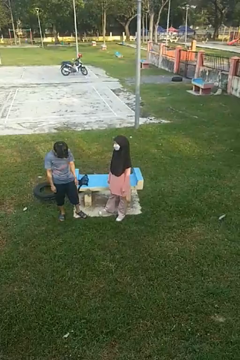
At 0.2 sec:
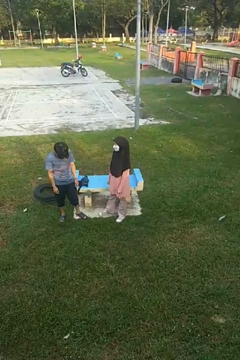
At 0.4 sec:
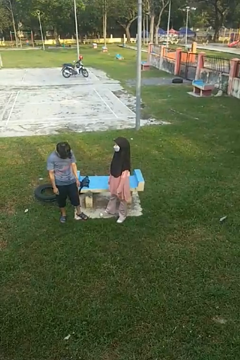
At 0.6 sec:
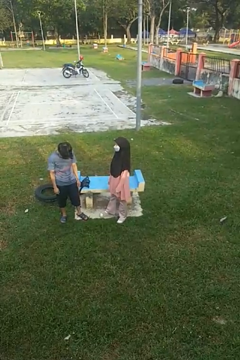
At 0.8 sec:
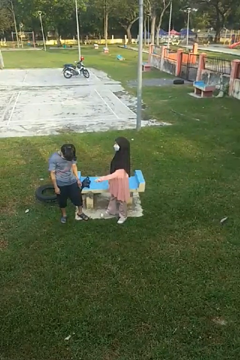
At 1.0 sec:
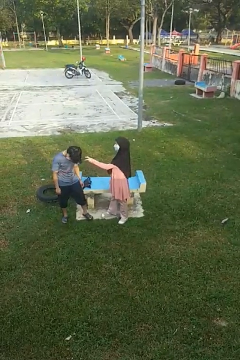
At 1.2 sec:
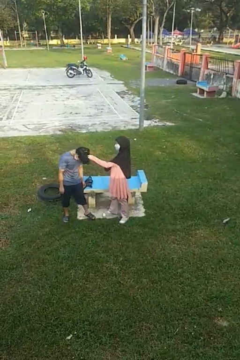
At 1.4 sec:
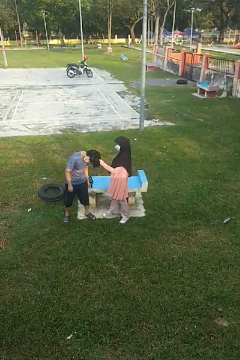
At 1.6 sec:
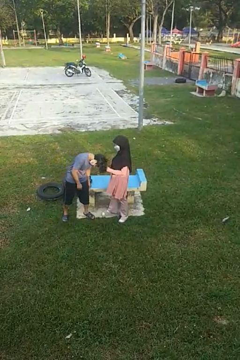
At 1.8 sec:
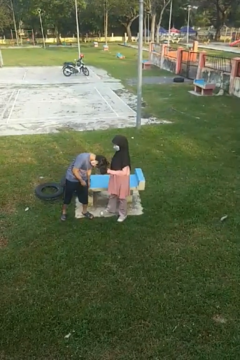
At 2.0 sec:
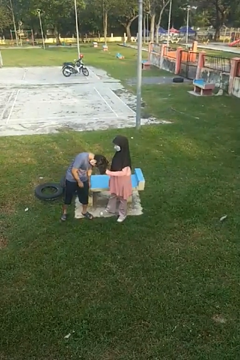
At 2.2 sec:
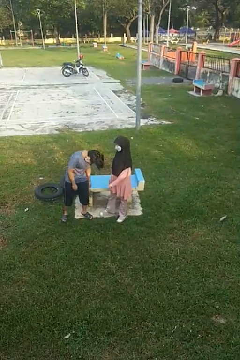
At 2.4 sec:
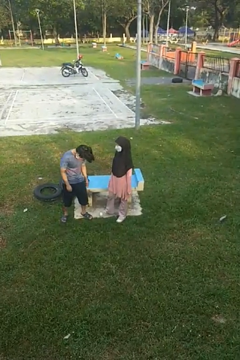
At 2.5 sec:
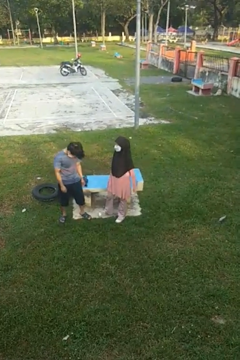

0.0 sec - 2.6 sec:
person grabs person by hair

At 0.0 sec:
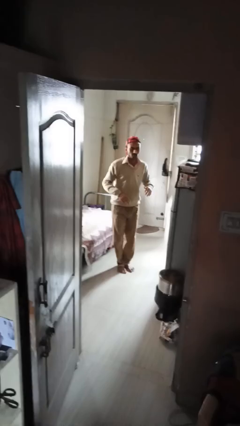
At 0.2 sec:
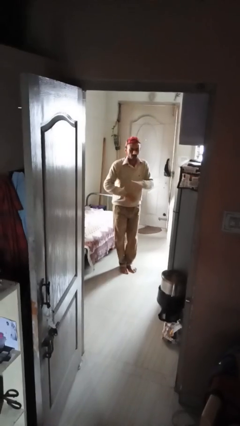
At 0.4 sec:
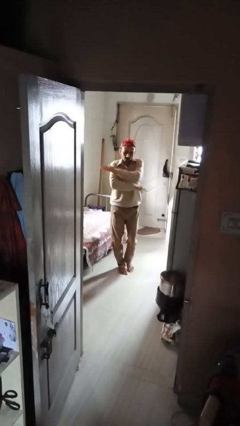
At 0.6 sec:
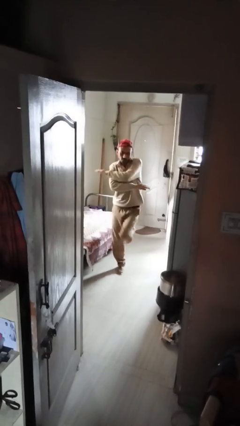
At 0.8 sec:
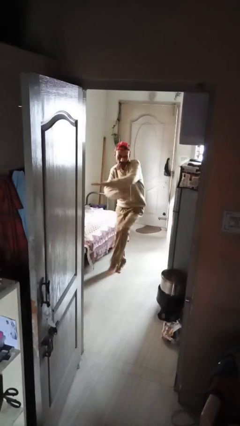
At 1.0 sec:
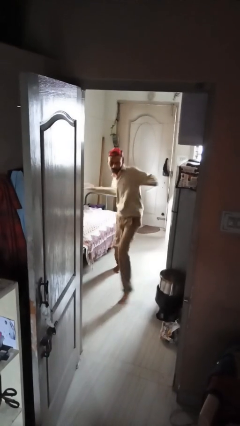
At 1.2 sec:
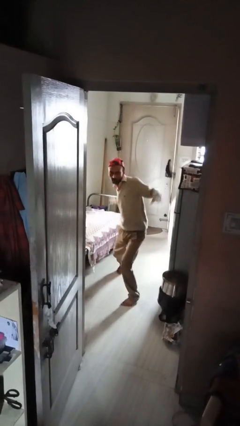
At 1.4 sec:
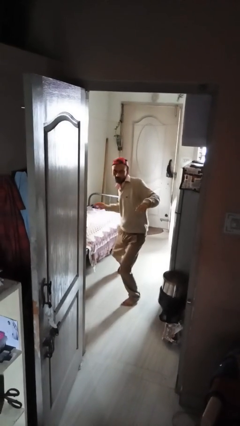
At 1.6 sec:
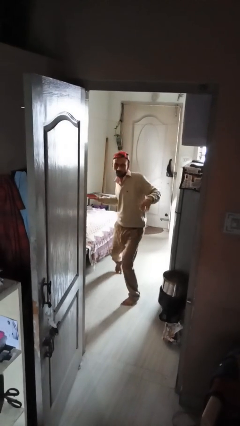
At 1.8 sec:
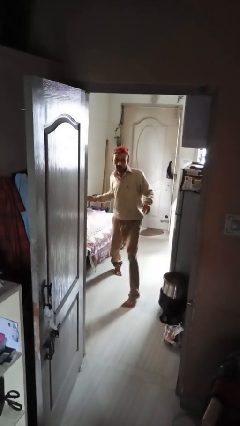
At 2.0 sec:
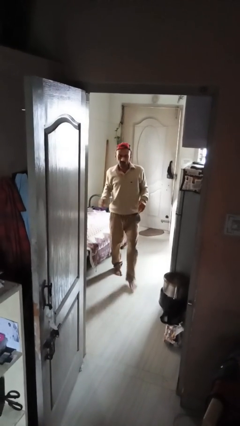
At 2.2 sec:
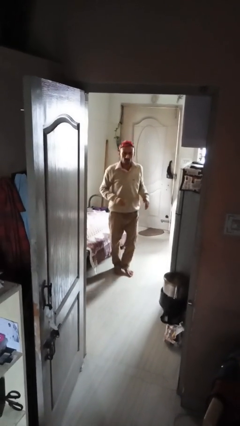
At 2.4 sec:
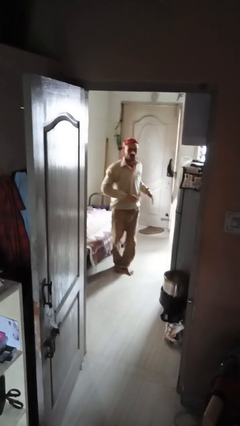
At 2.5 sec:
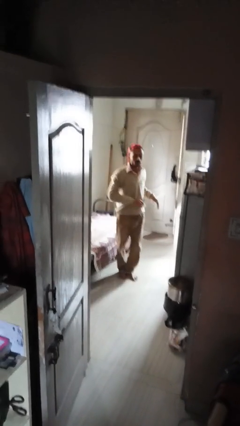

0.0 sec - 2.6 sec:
person karate chop

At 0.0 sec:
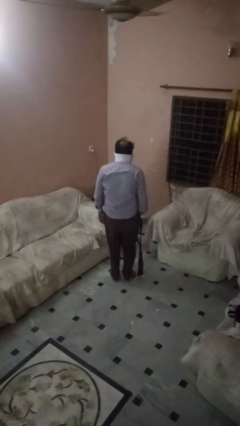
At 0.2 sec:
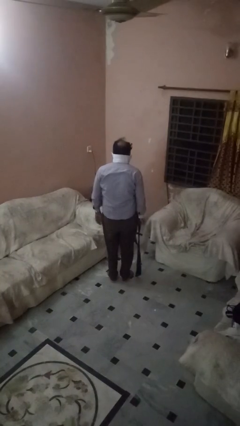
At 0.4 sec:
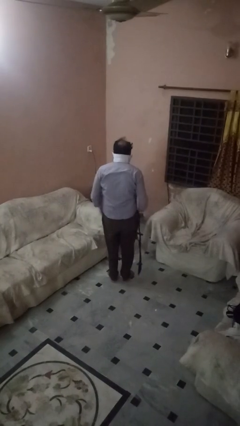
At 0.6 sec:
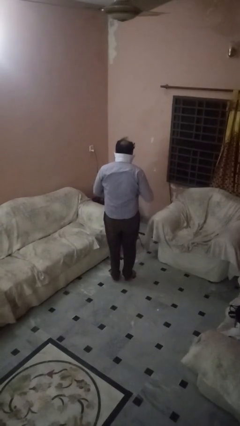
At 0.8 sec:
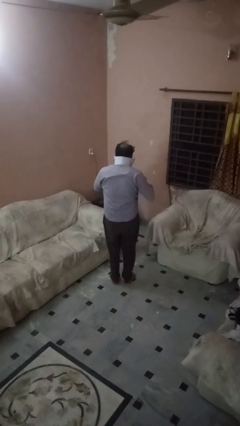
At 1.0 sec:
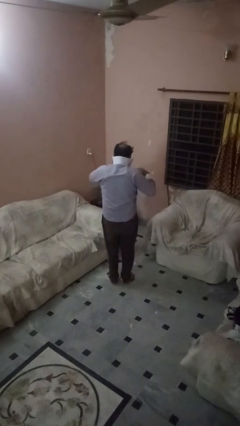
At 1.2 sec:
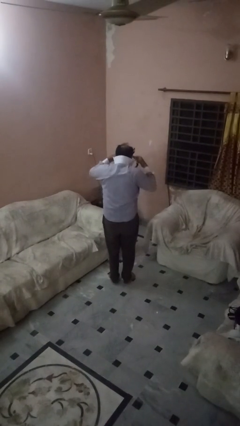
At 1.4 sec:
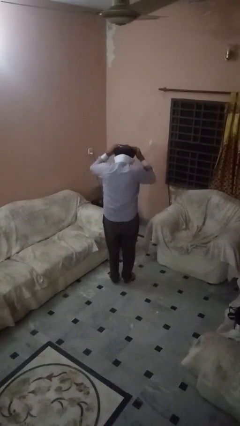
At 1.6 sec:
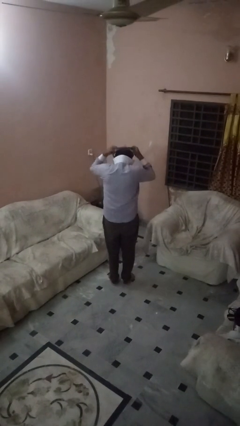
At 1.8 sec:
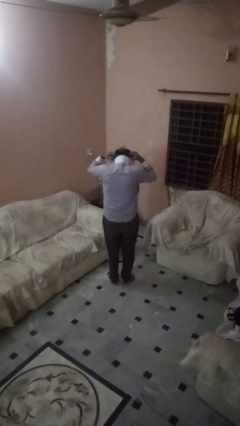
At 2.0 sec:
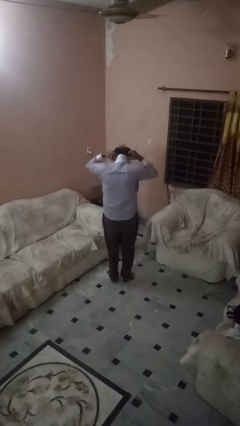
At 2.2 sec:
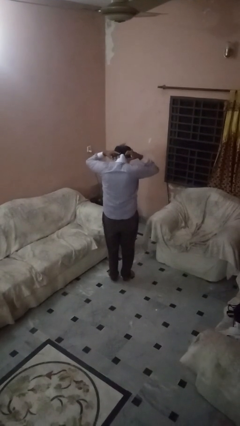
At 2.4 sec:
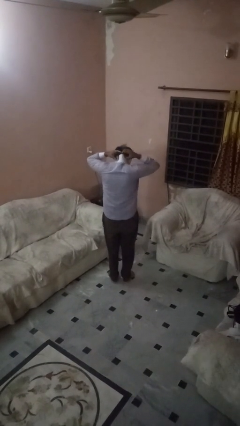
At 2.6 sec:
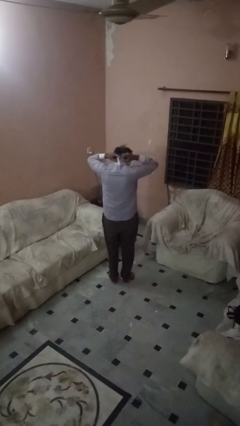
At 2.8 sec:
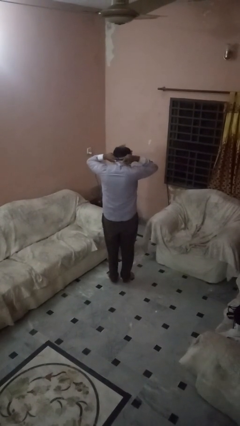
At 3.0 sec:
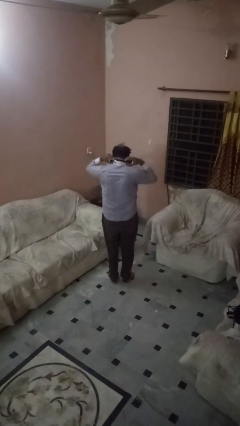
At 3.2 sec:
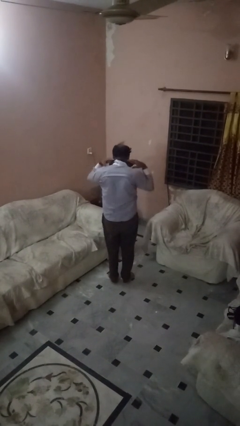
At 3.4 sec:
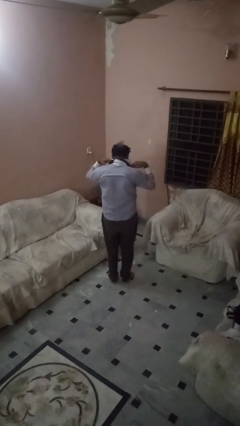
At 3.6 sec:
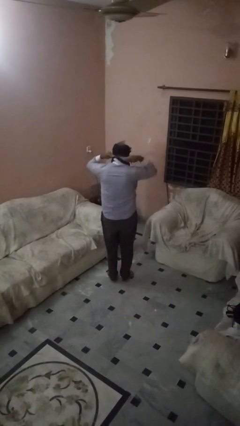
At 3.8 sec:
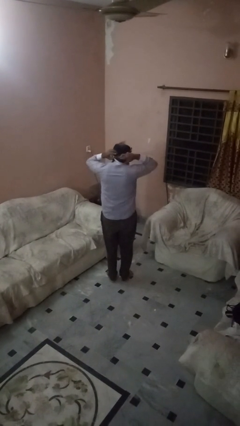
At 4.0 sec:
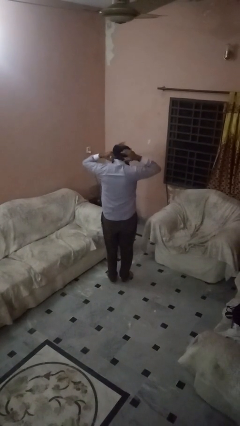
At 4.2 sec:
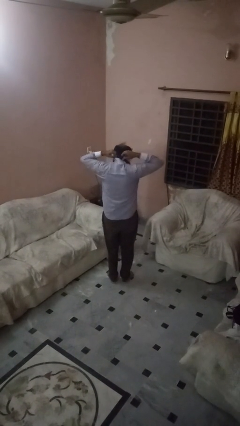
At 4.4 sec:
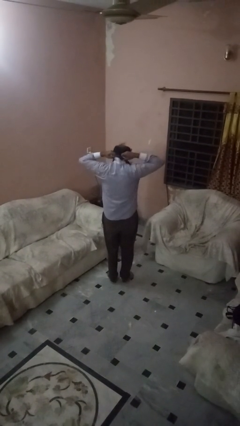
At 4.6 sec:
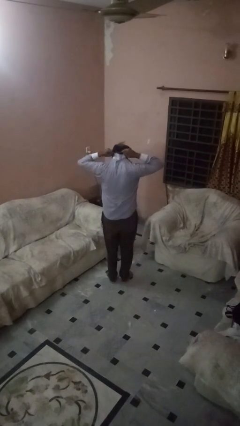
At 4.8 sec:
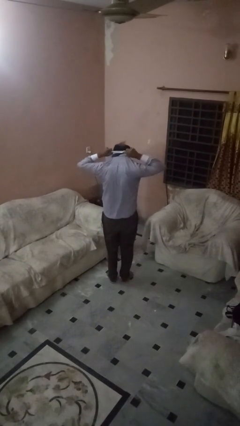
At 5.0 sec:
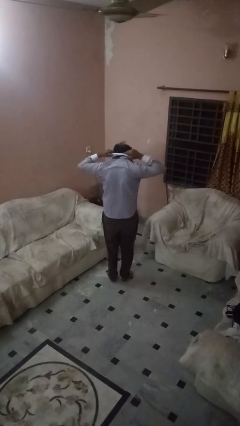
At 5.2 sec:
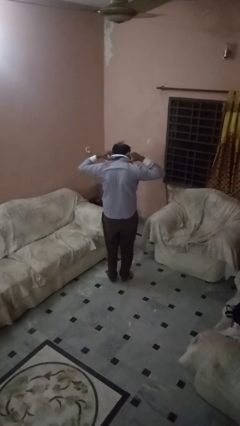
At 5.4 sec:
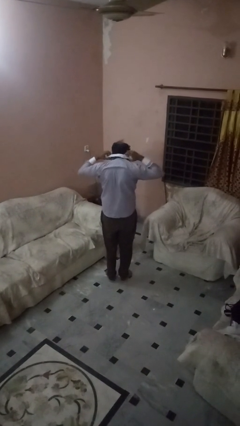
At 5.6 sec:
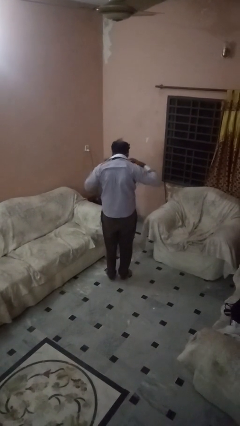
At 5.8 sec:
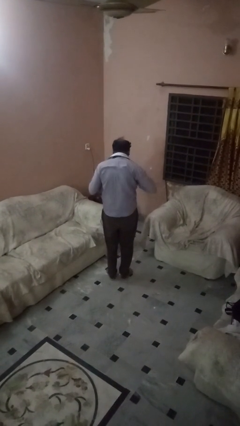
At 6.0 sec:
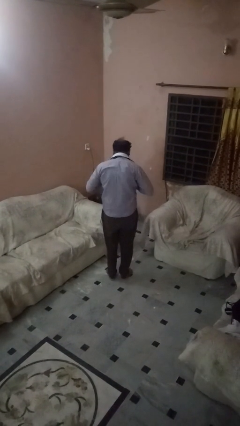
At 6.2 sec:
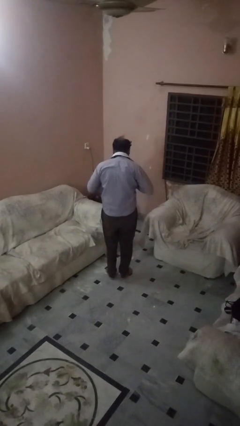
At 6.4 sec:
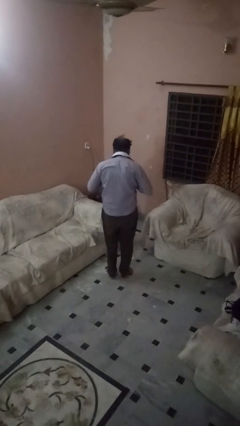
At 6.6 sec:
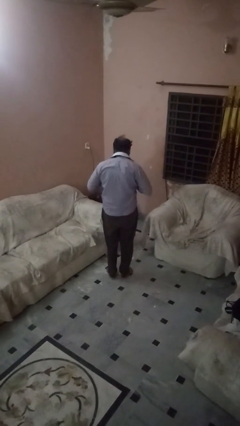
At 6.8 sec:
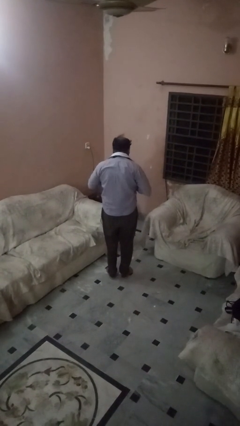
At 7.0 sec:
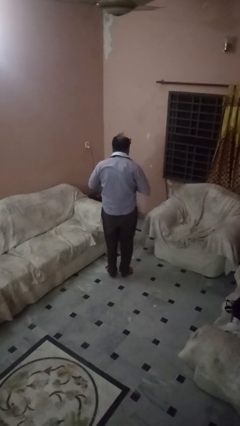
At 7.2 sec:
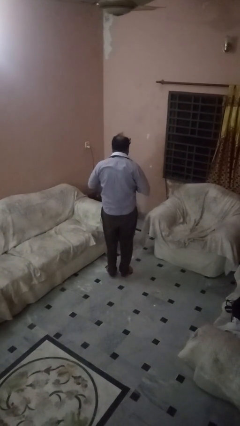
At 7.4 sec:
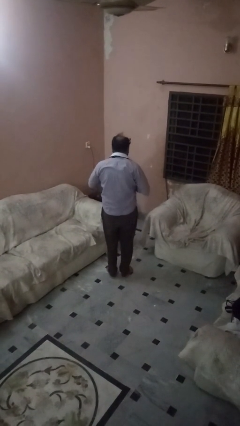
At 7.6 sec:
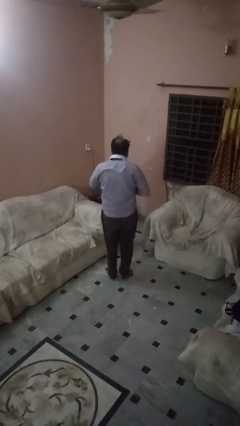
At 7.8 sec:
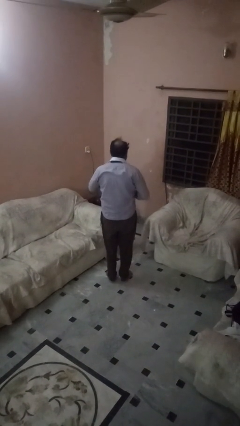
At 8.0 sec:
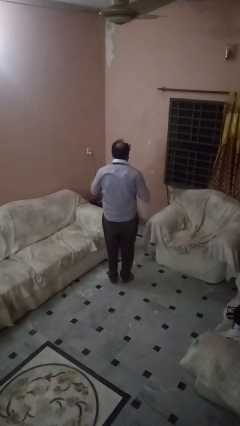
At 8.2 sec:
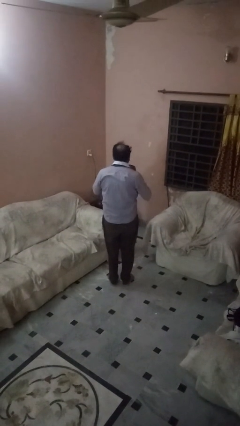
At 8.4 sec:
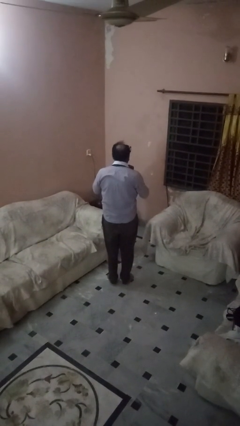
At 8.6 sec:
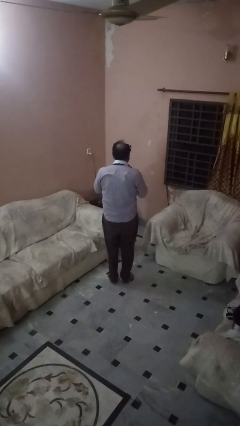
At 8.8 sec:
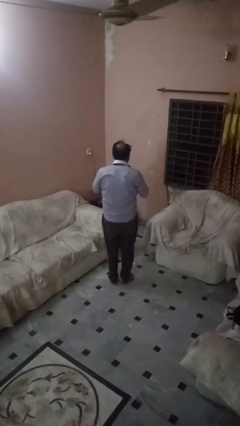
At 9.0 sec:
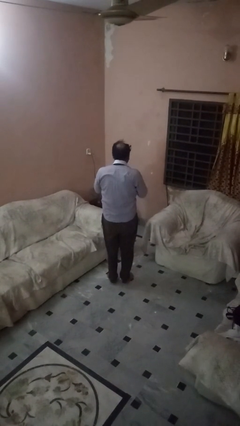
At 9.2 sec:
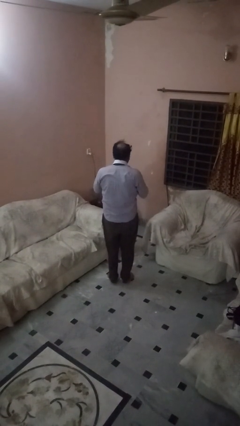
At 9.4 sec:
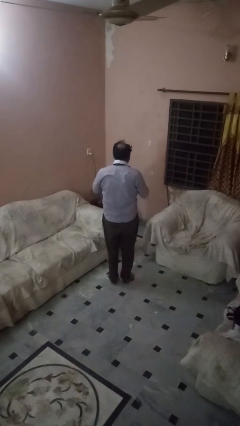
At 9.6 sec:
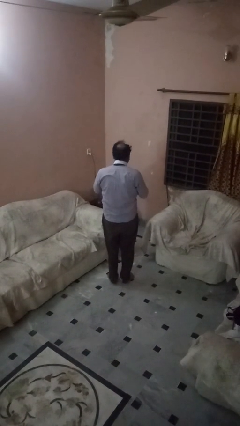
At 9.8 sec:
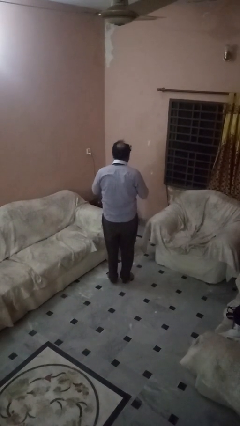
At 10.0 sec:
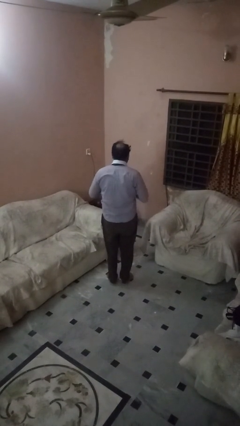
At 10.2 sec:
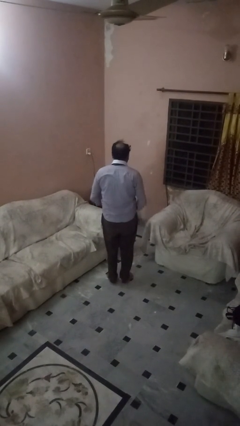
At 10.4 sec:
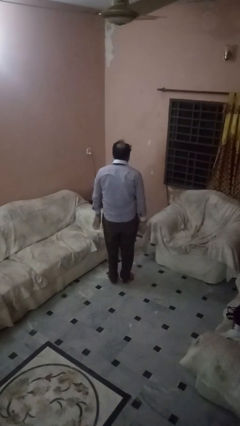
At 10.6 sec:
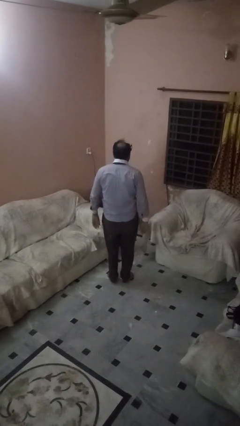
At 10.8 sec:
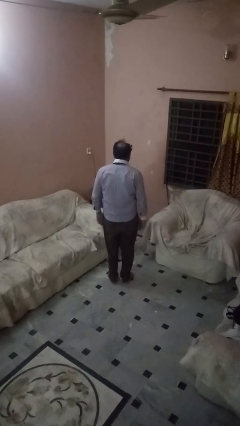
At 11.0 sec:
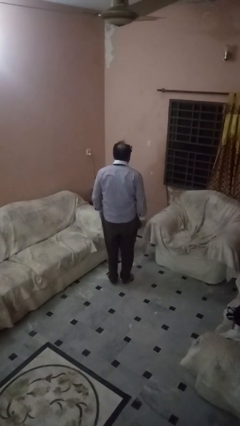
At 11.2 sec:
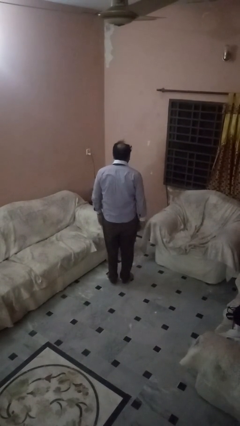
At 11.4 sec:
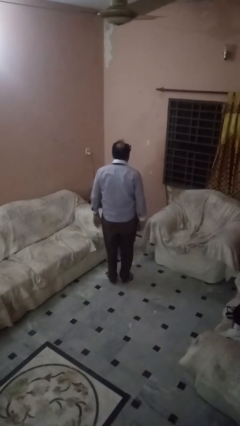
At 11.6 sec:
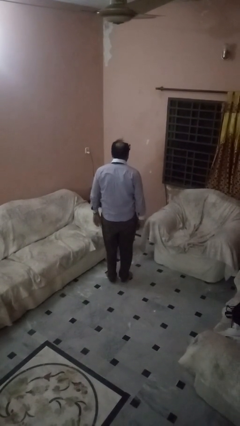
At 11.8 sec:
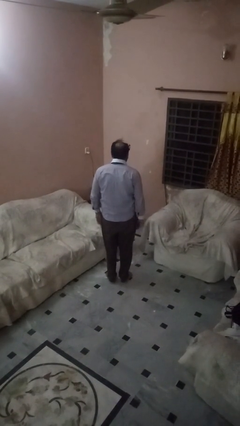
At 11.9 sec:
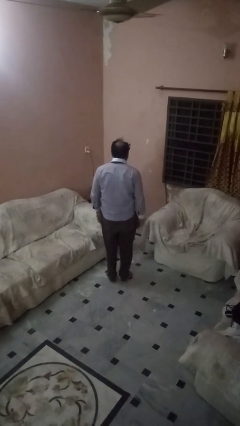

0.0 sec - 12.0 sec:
person puts on necktie

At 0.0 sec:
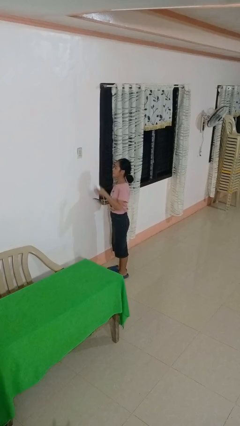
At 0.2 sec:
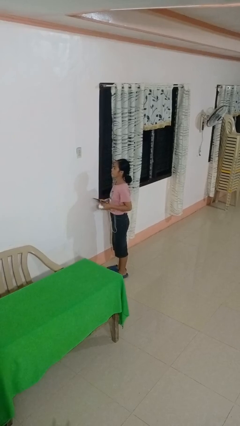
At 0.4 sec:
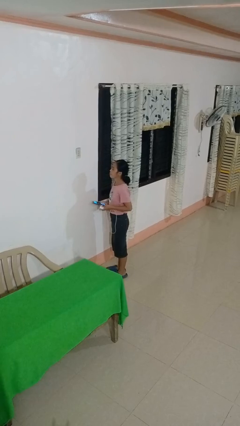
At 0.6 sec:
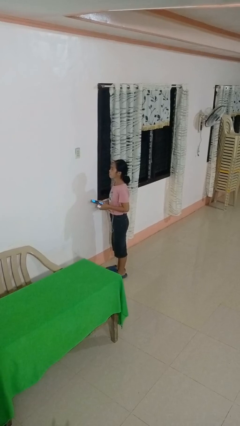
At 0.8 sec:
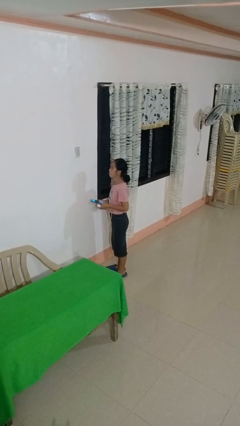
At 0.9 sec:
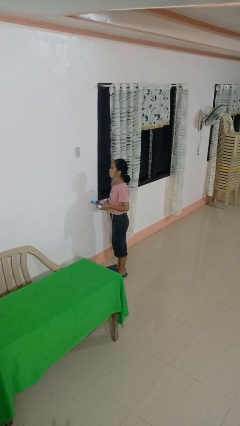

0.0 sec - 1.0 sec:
person unplugs from electrical socket
